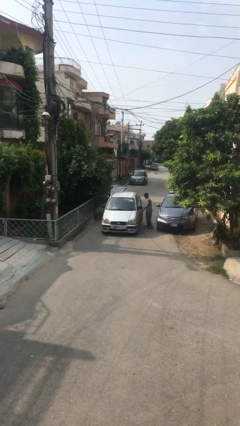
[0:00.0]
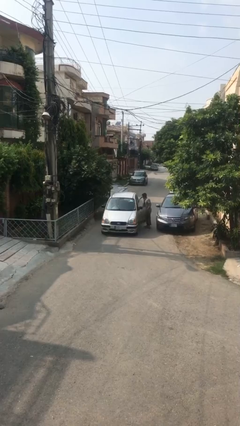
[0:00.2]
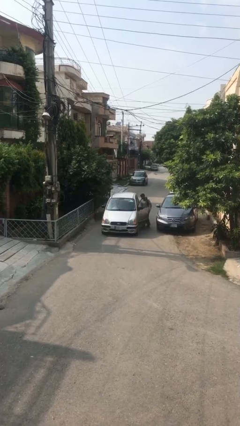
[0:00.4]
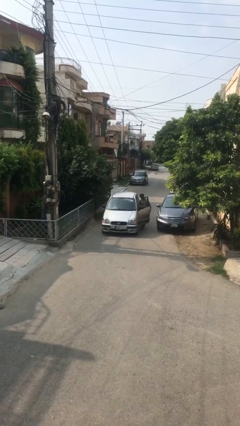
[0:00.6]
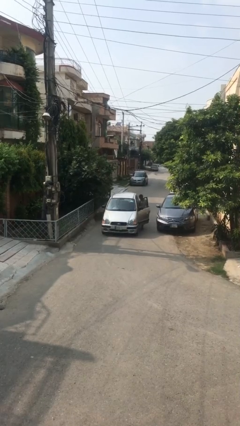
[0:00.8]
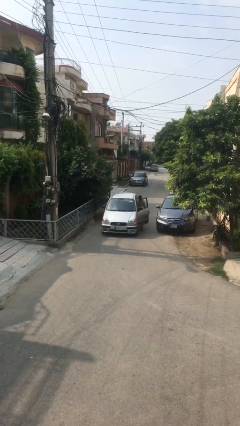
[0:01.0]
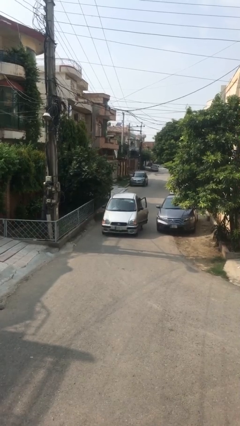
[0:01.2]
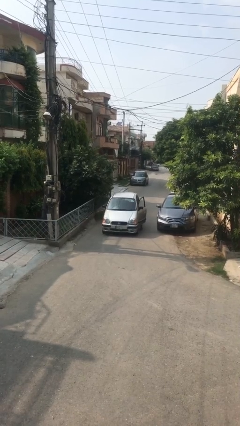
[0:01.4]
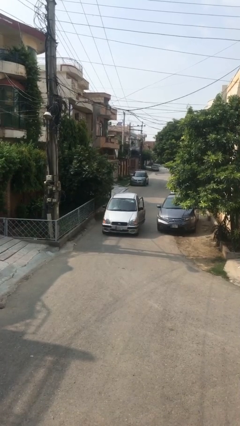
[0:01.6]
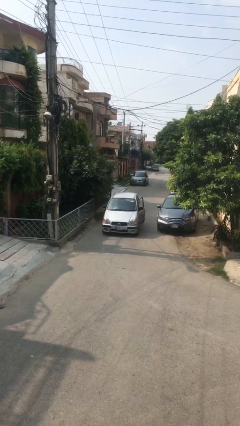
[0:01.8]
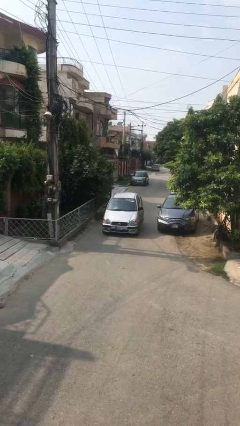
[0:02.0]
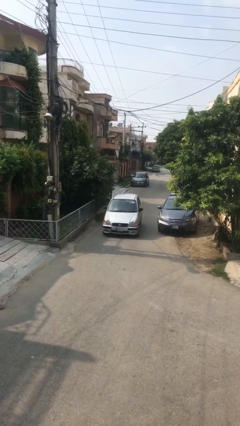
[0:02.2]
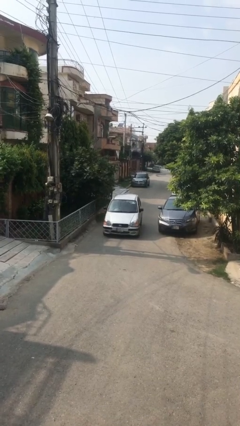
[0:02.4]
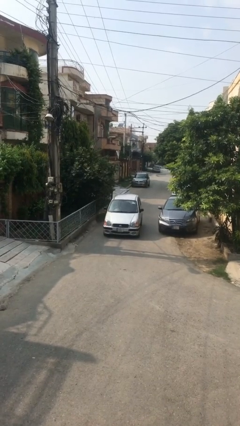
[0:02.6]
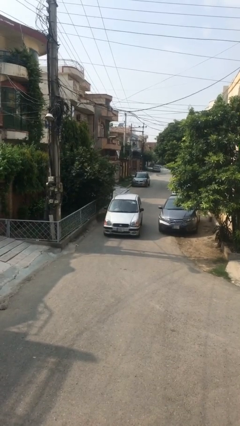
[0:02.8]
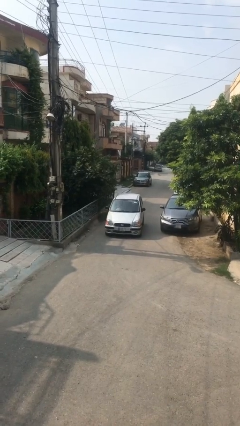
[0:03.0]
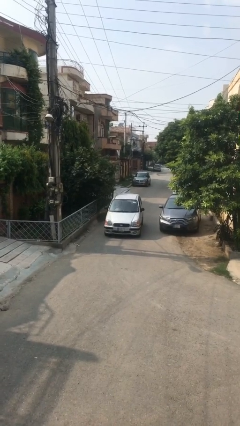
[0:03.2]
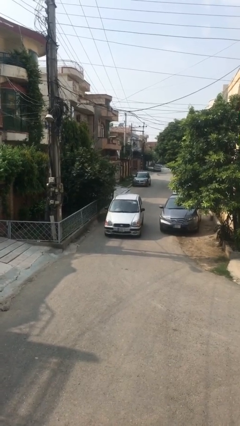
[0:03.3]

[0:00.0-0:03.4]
car picks up person

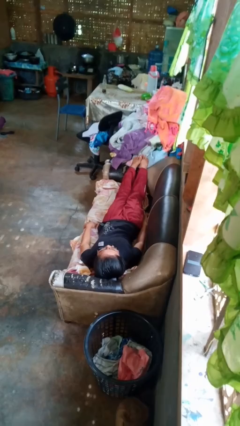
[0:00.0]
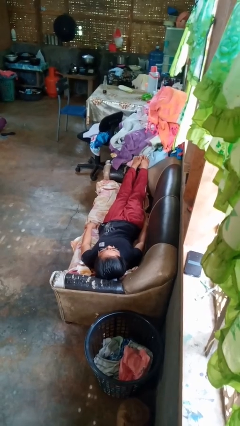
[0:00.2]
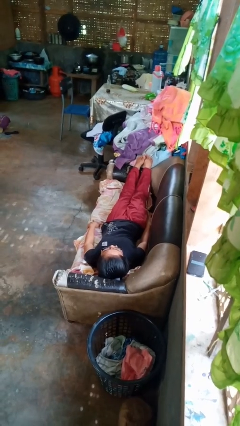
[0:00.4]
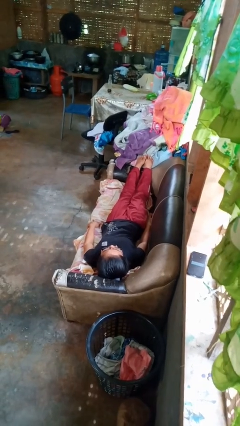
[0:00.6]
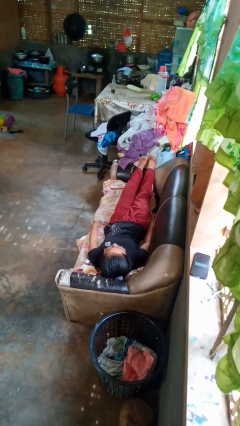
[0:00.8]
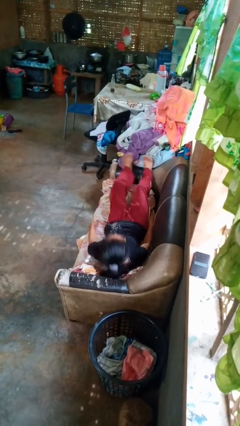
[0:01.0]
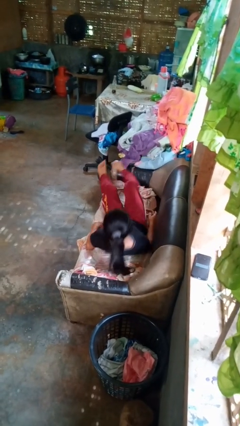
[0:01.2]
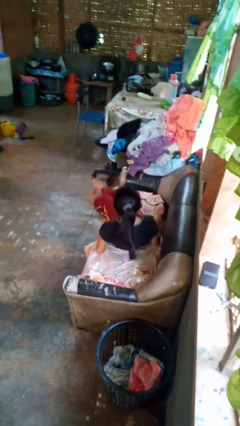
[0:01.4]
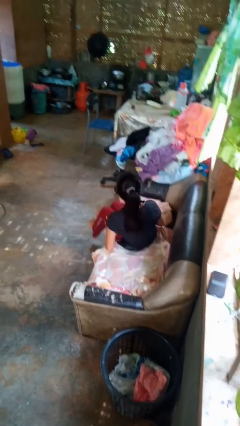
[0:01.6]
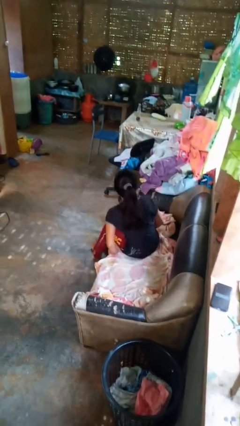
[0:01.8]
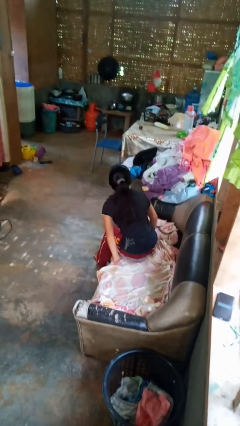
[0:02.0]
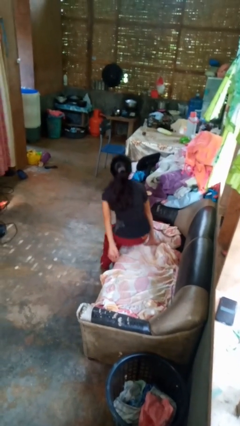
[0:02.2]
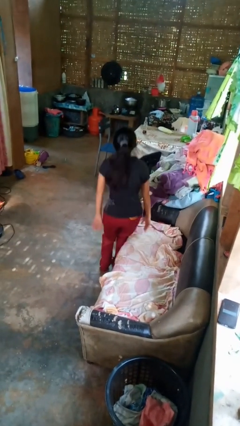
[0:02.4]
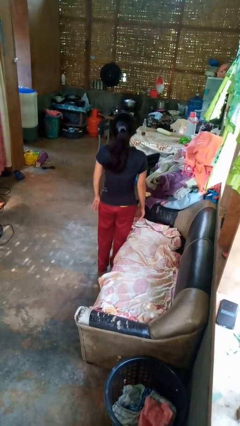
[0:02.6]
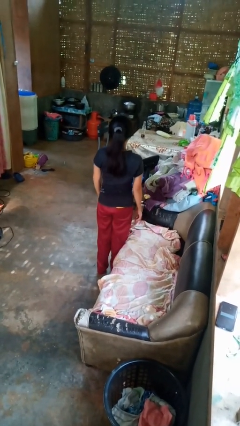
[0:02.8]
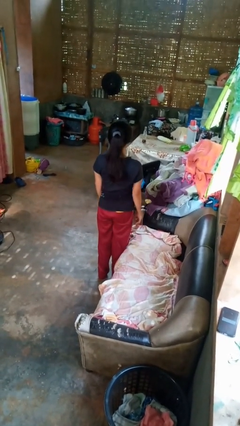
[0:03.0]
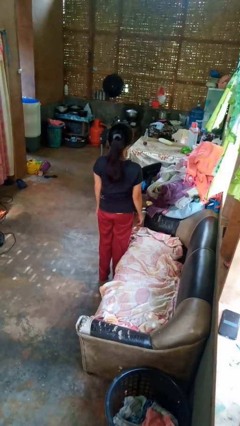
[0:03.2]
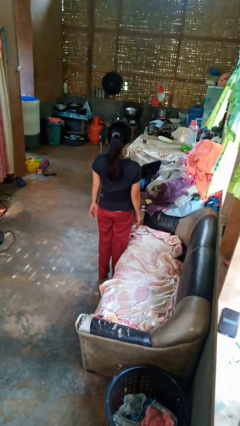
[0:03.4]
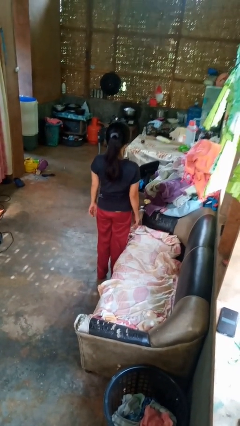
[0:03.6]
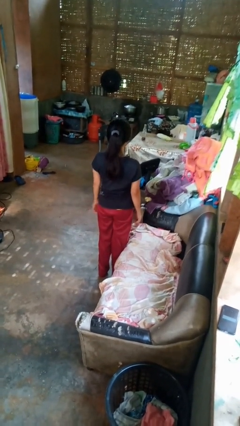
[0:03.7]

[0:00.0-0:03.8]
person stands up

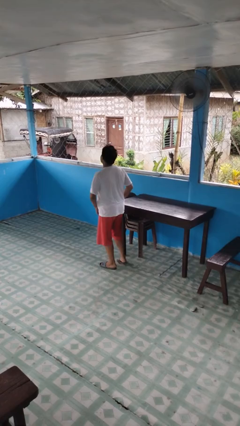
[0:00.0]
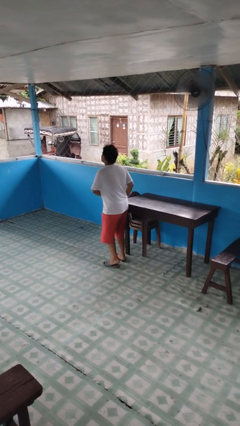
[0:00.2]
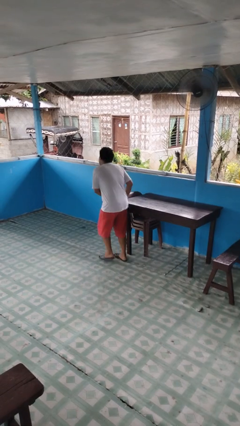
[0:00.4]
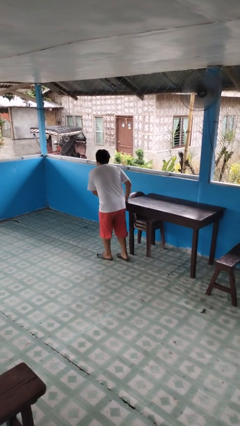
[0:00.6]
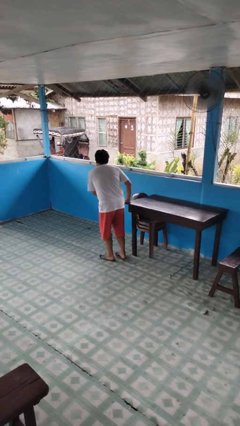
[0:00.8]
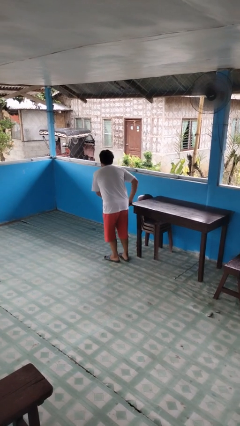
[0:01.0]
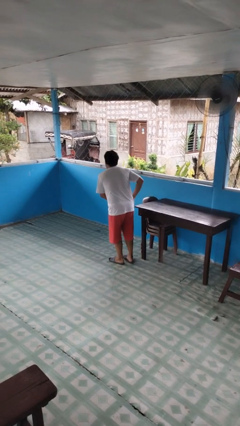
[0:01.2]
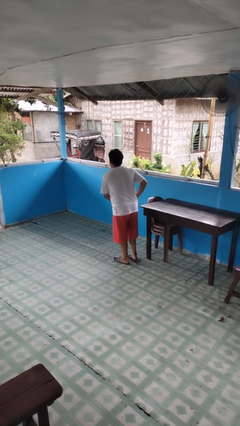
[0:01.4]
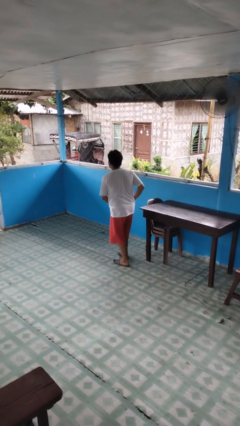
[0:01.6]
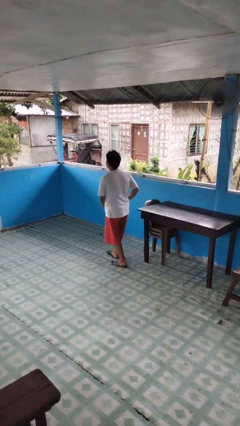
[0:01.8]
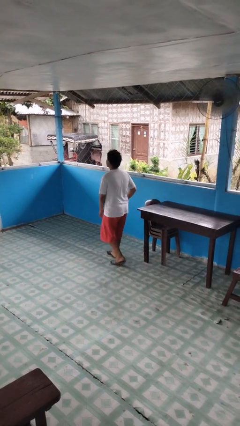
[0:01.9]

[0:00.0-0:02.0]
person bumps into table

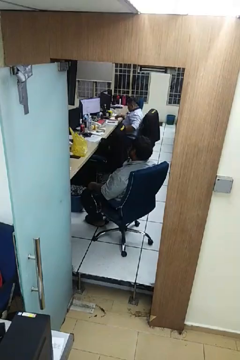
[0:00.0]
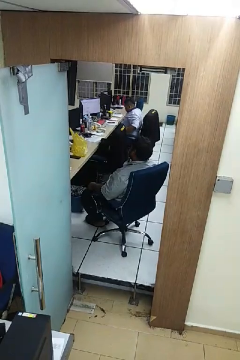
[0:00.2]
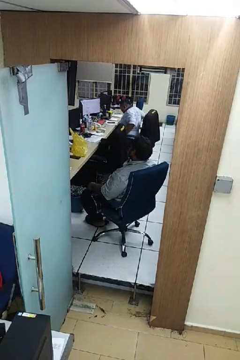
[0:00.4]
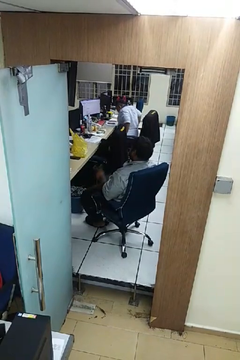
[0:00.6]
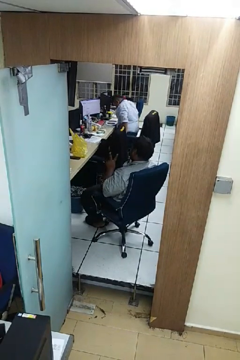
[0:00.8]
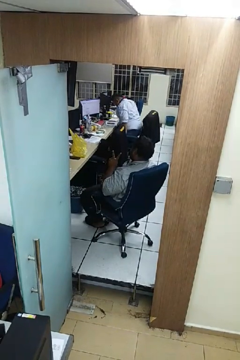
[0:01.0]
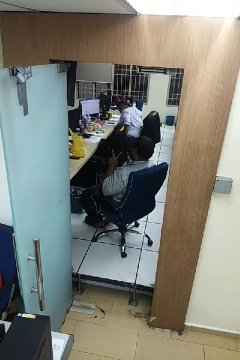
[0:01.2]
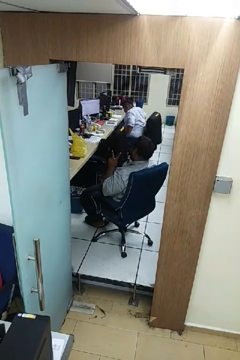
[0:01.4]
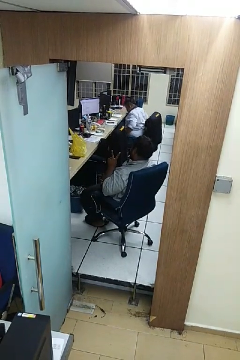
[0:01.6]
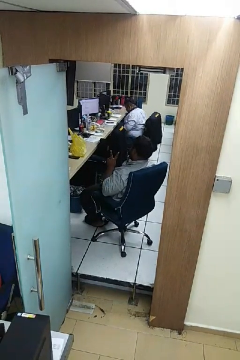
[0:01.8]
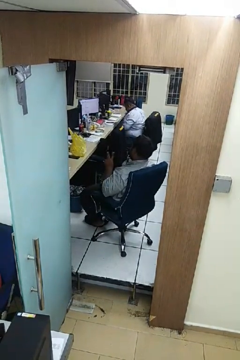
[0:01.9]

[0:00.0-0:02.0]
person gestures peace

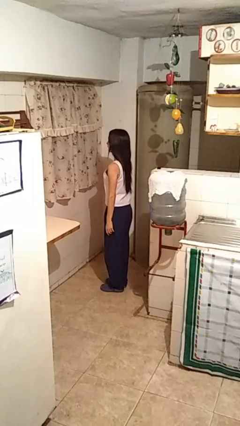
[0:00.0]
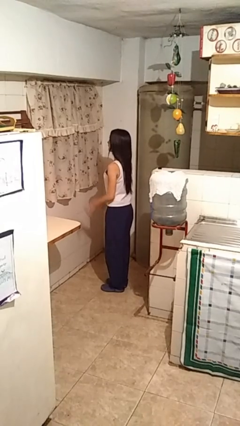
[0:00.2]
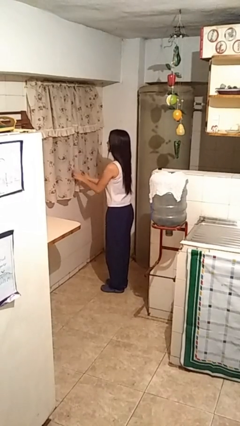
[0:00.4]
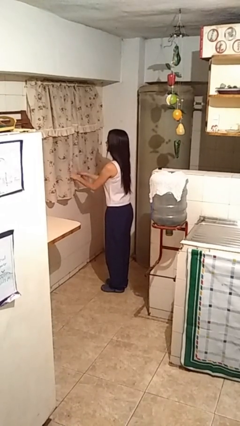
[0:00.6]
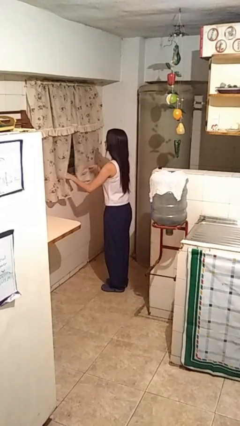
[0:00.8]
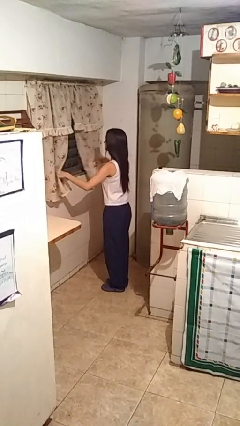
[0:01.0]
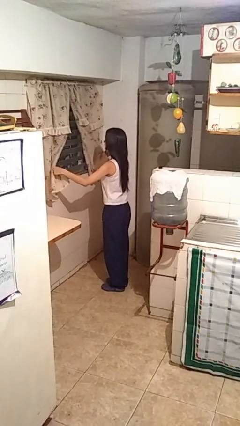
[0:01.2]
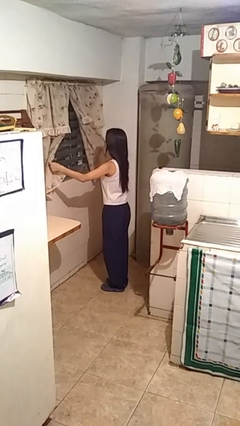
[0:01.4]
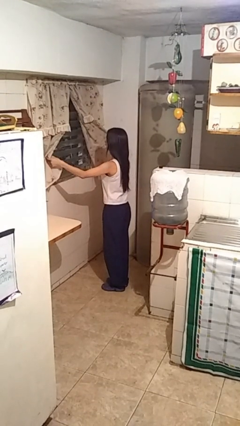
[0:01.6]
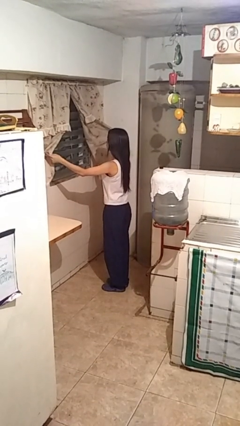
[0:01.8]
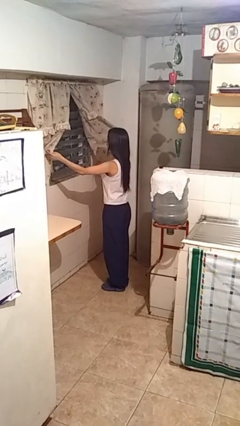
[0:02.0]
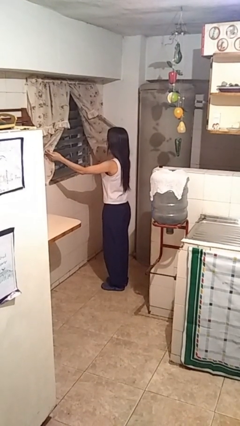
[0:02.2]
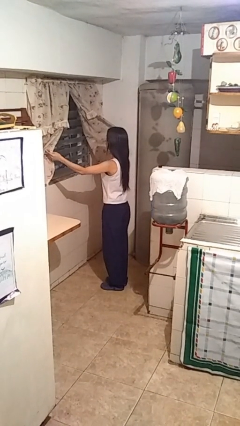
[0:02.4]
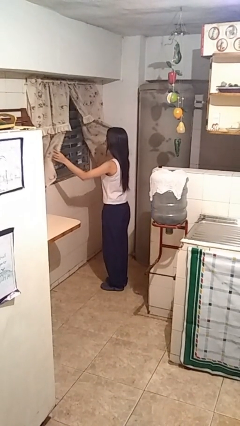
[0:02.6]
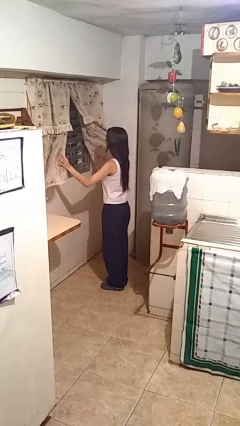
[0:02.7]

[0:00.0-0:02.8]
person opens curtains

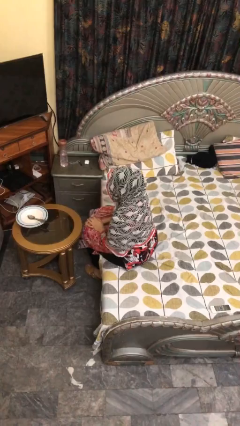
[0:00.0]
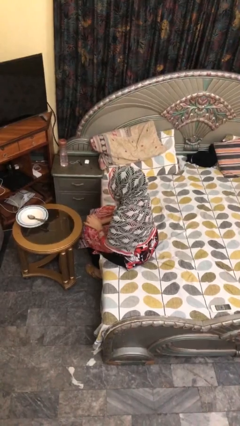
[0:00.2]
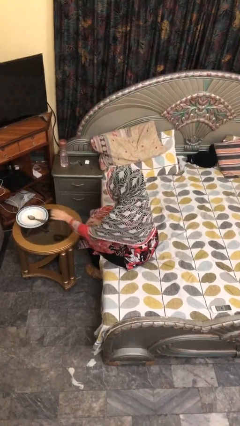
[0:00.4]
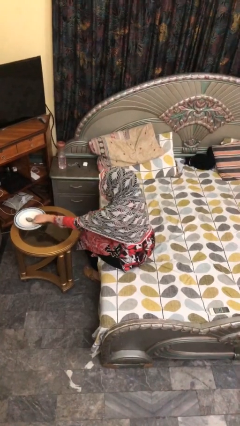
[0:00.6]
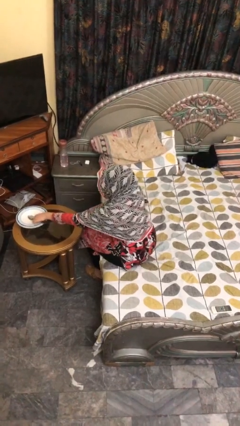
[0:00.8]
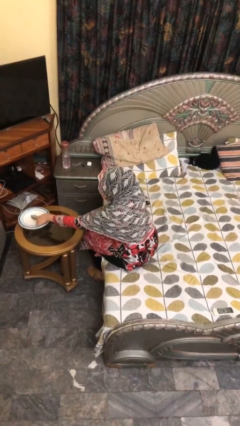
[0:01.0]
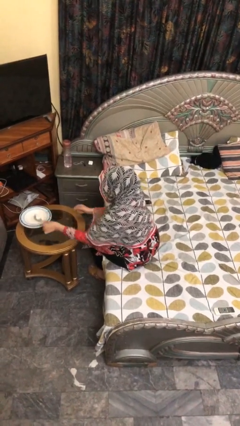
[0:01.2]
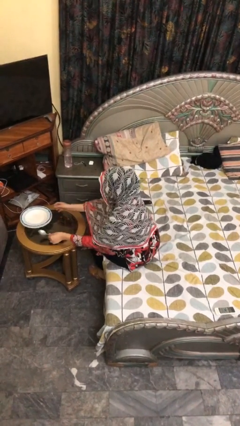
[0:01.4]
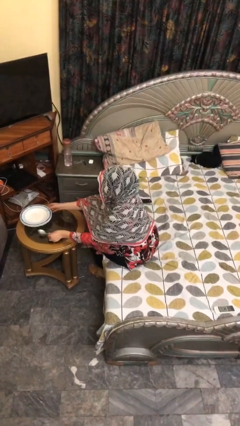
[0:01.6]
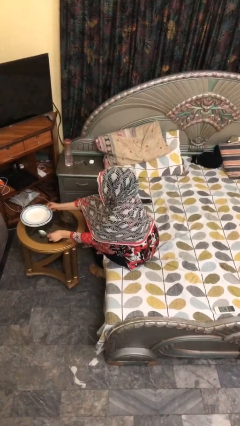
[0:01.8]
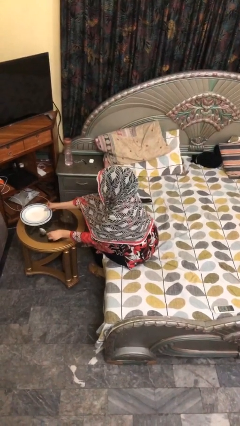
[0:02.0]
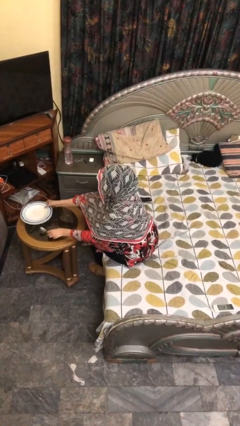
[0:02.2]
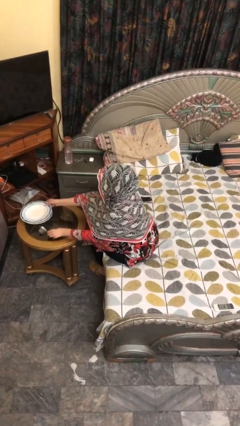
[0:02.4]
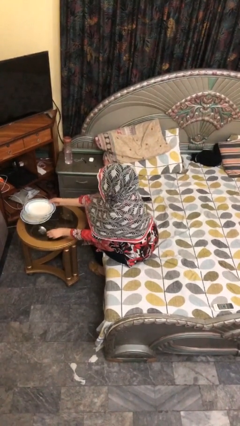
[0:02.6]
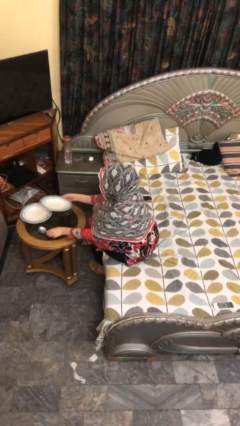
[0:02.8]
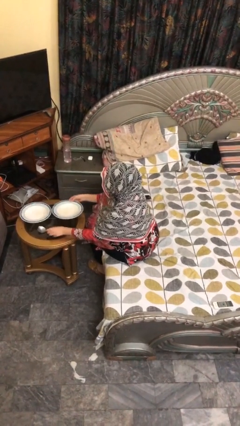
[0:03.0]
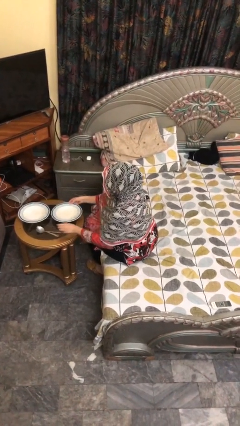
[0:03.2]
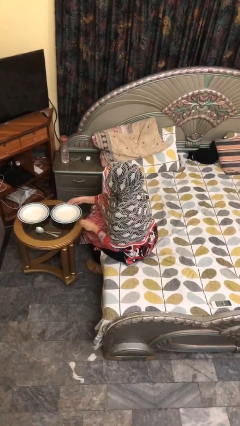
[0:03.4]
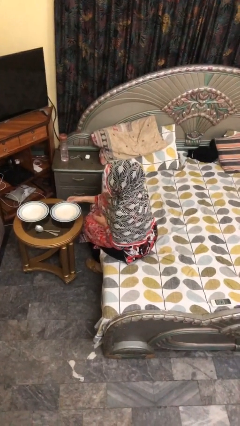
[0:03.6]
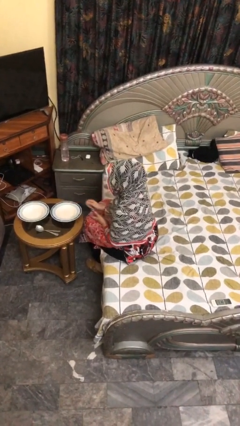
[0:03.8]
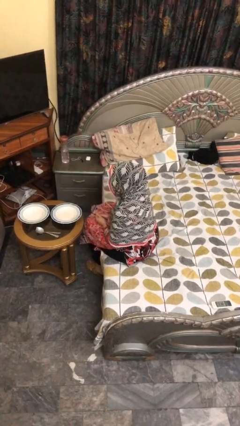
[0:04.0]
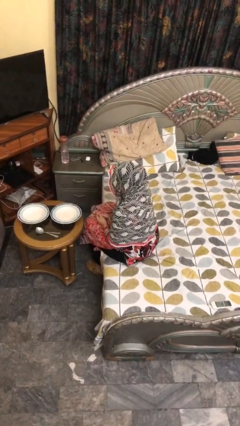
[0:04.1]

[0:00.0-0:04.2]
person sets table
